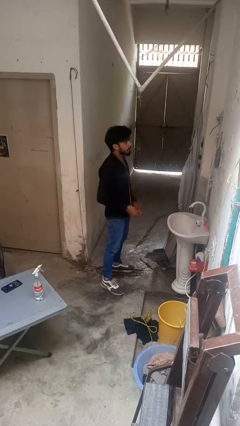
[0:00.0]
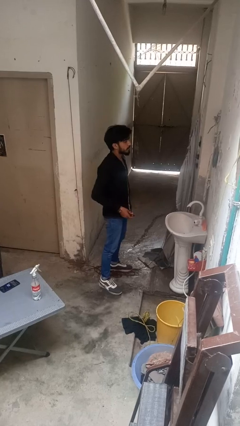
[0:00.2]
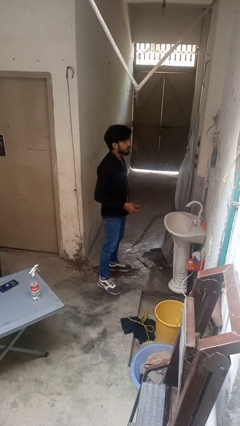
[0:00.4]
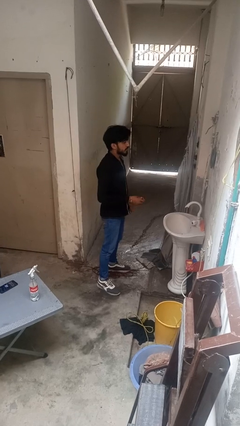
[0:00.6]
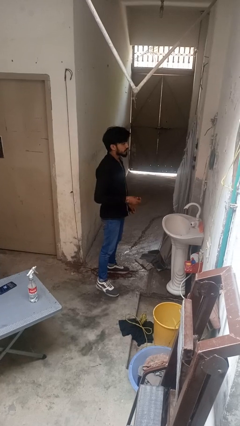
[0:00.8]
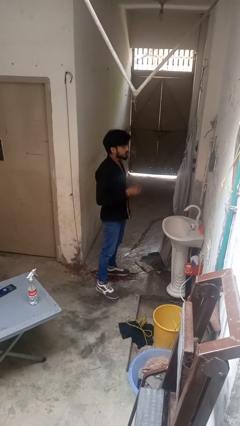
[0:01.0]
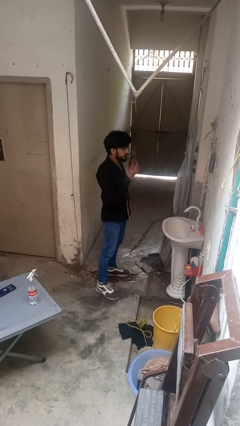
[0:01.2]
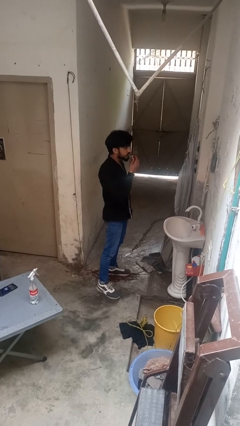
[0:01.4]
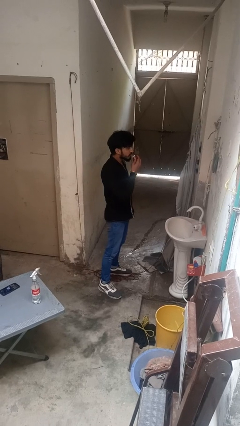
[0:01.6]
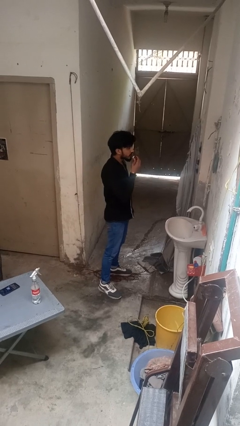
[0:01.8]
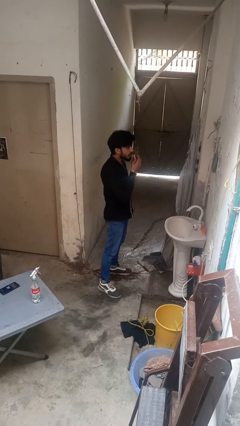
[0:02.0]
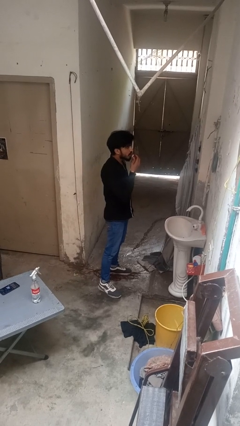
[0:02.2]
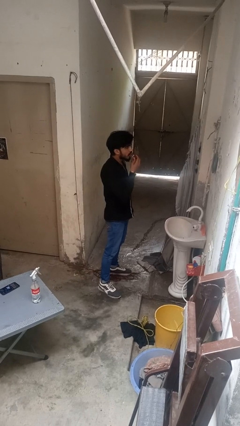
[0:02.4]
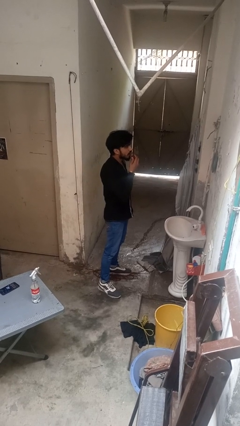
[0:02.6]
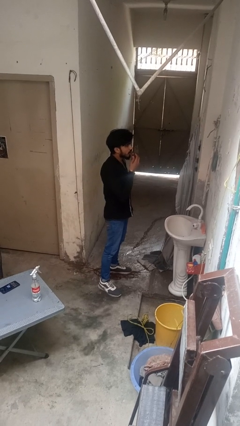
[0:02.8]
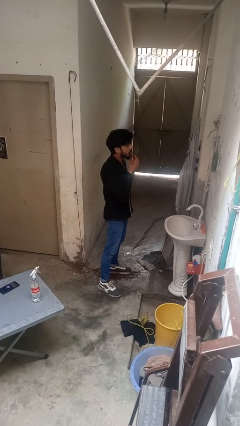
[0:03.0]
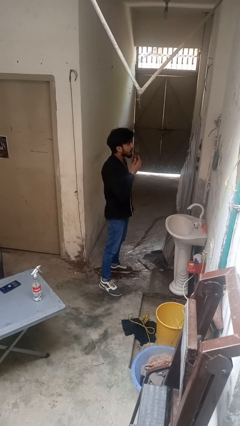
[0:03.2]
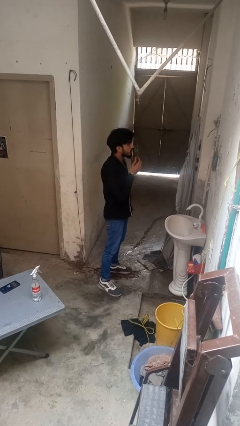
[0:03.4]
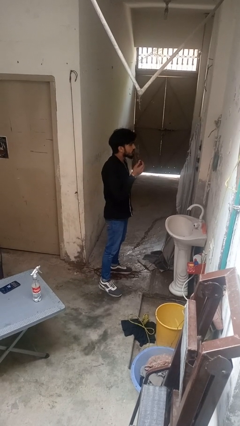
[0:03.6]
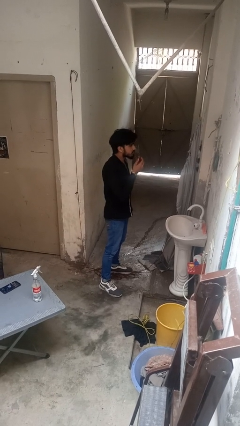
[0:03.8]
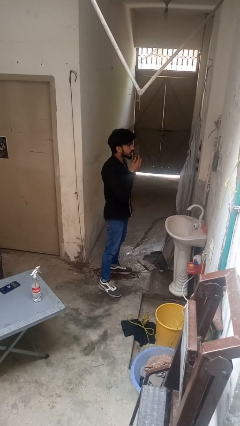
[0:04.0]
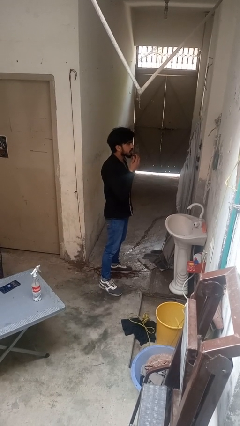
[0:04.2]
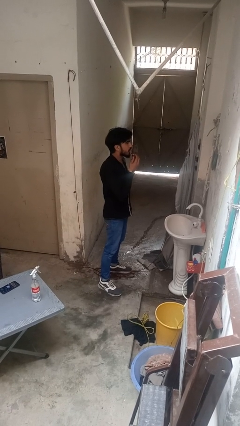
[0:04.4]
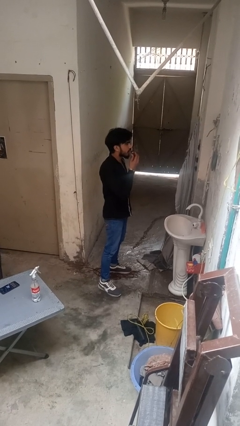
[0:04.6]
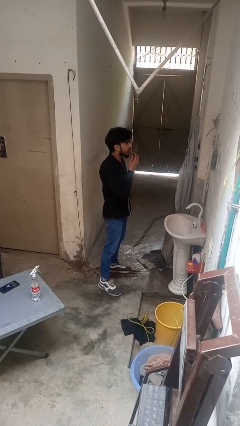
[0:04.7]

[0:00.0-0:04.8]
person applies lip makeup

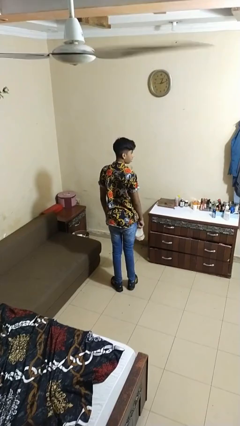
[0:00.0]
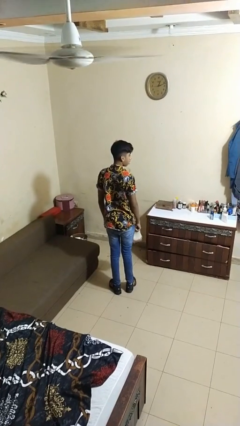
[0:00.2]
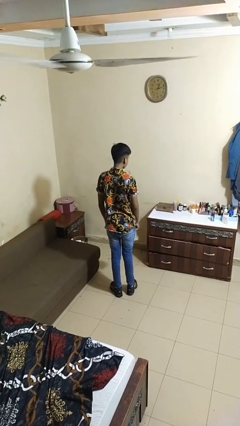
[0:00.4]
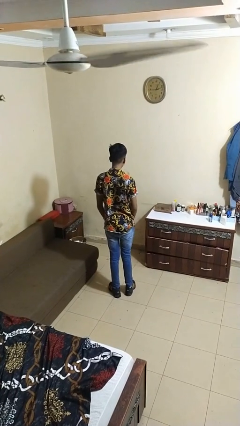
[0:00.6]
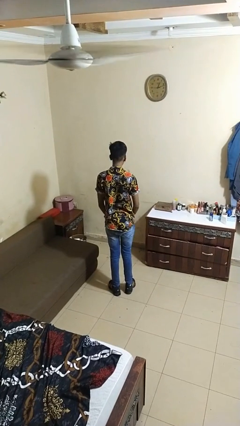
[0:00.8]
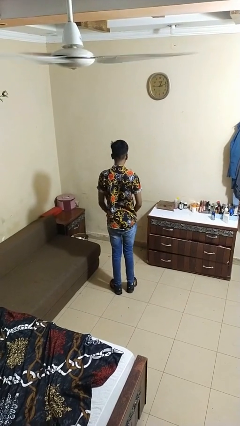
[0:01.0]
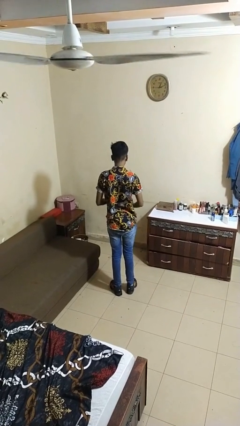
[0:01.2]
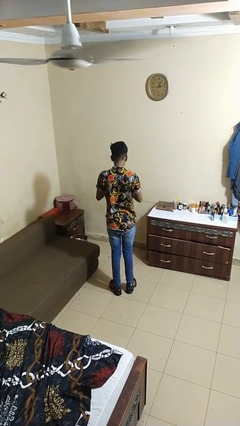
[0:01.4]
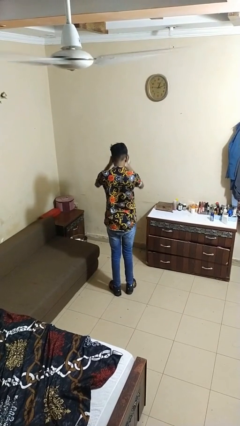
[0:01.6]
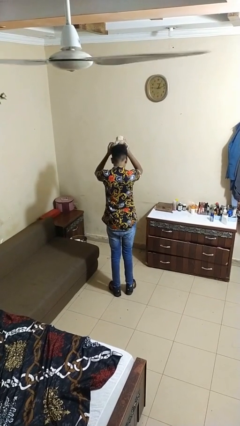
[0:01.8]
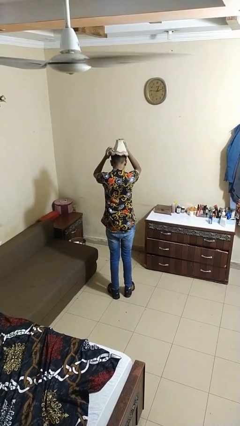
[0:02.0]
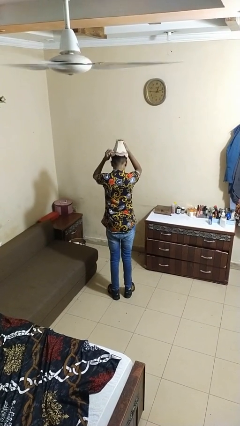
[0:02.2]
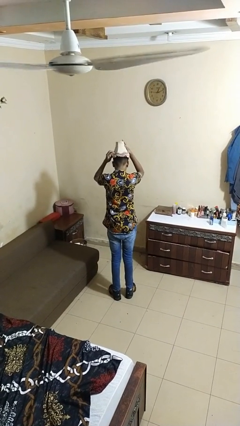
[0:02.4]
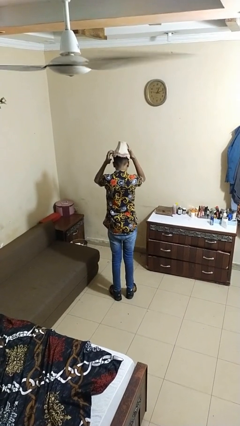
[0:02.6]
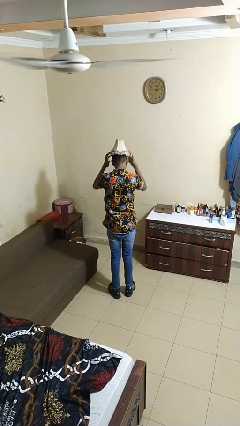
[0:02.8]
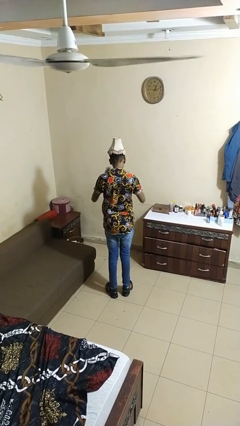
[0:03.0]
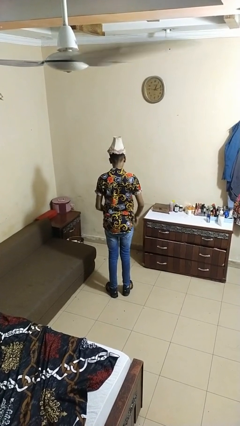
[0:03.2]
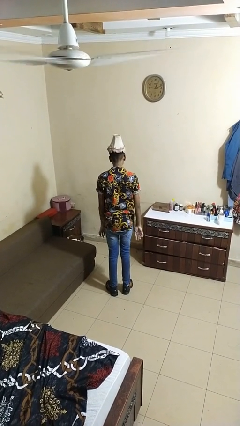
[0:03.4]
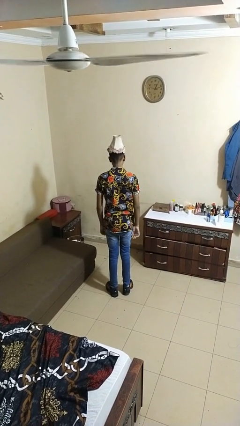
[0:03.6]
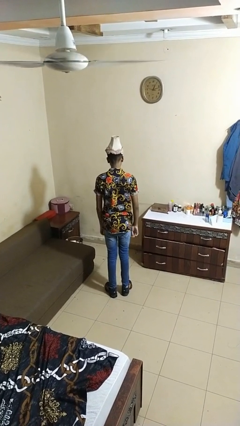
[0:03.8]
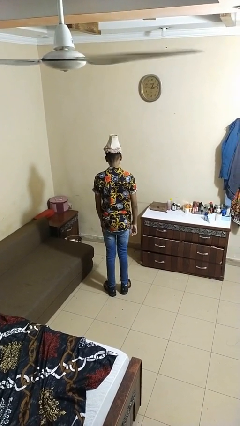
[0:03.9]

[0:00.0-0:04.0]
person puts on hat

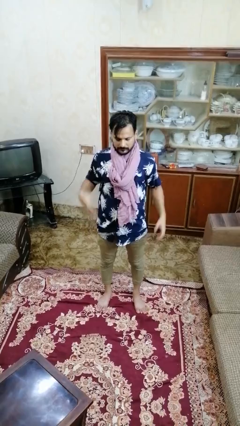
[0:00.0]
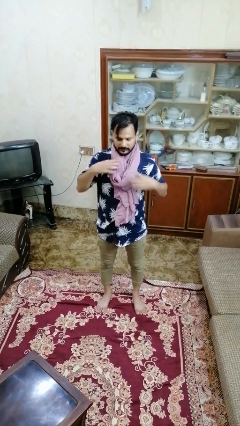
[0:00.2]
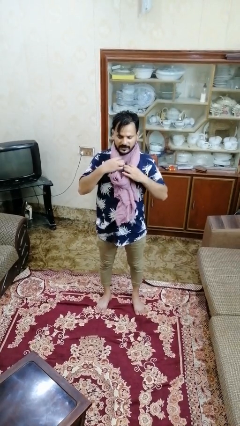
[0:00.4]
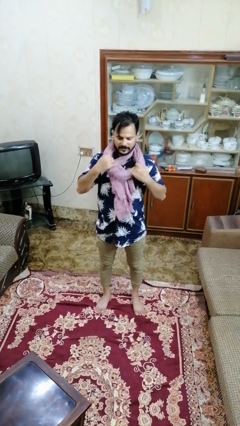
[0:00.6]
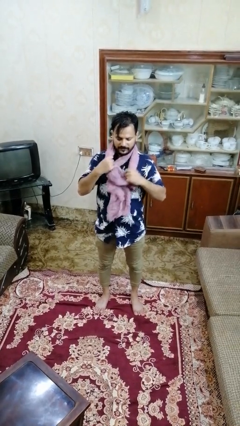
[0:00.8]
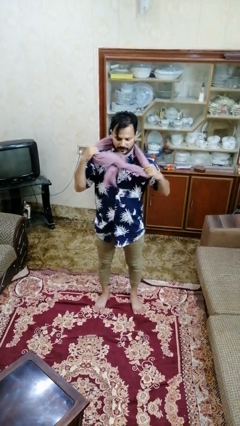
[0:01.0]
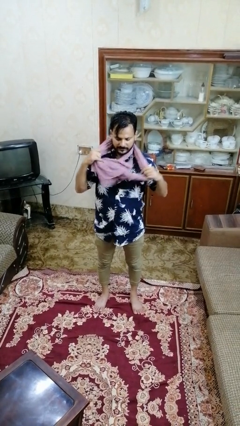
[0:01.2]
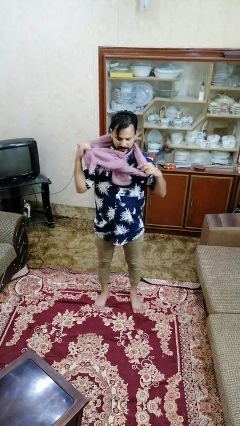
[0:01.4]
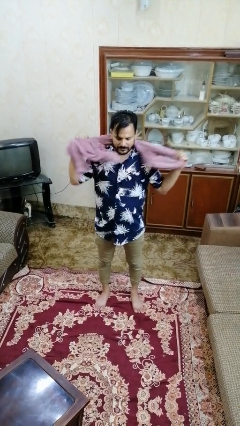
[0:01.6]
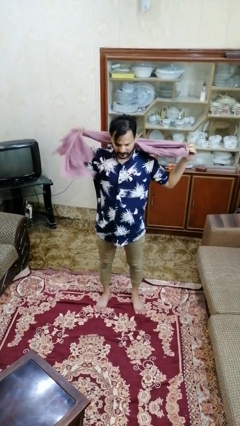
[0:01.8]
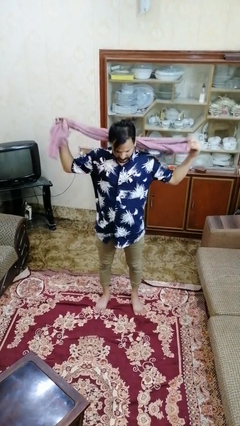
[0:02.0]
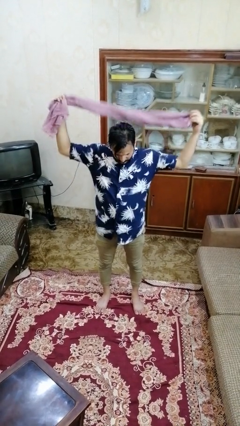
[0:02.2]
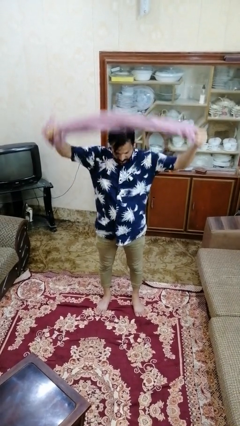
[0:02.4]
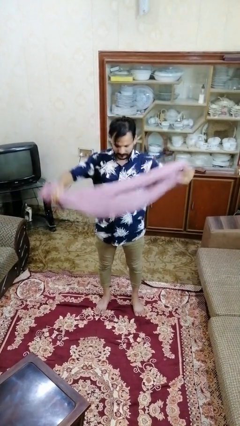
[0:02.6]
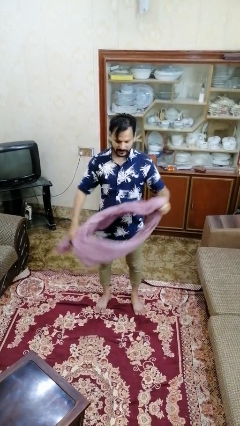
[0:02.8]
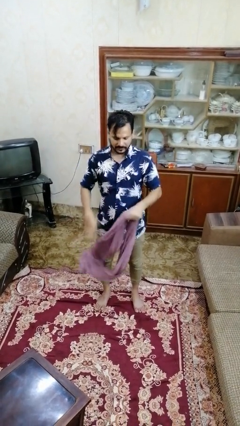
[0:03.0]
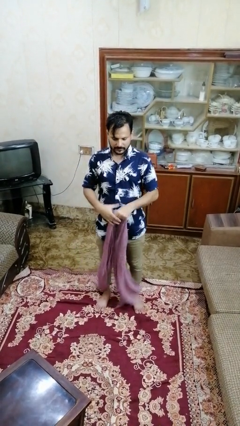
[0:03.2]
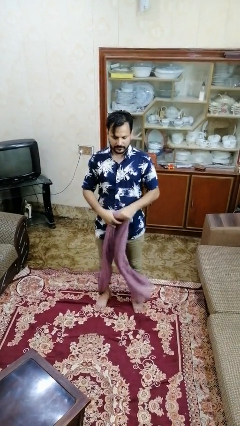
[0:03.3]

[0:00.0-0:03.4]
person takes off scarf

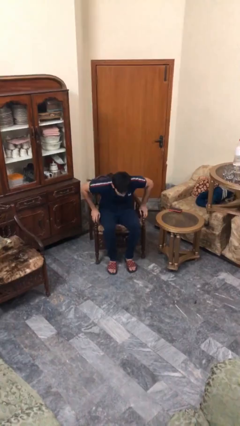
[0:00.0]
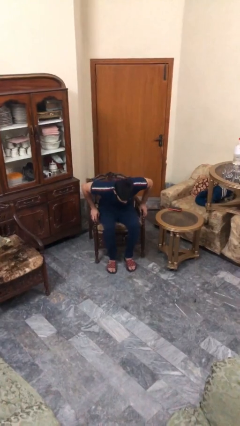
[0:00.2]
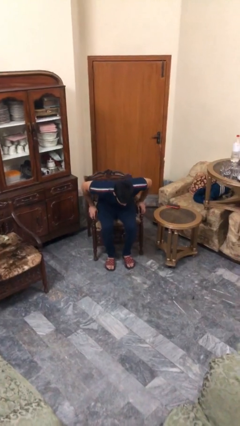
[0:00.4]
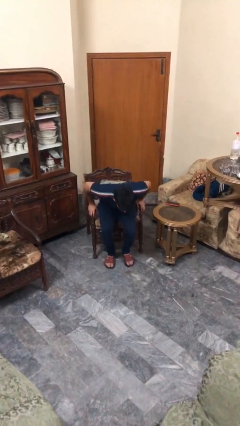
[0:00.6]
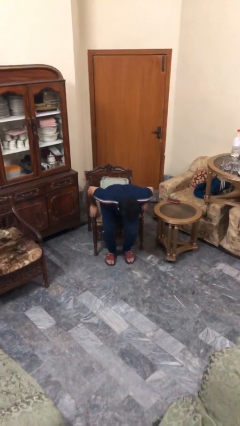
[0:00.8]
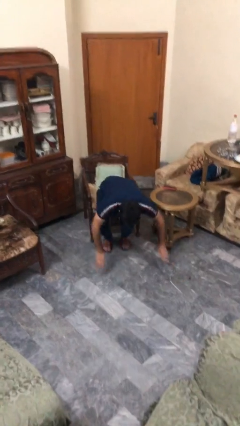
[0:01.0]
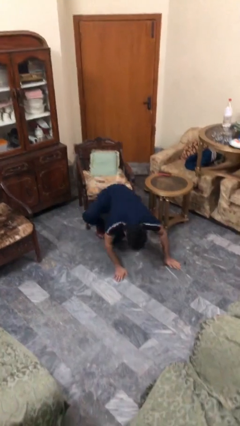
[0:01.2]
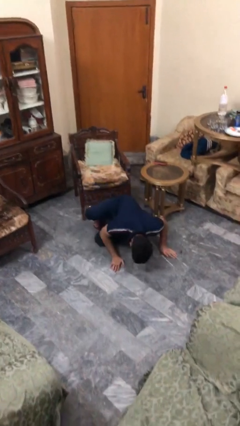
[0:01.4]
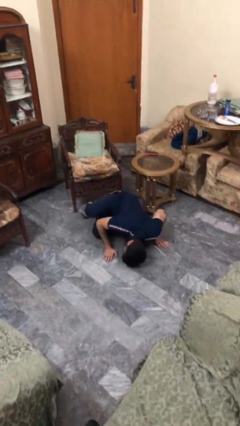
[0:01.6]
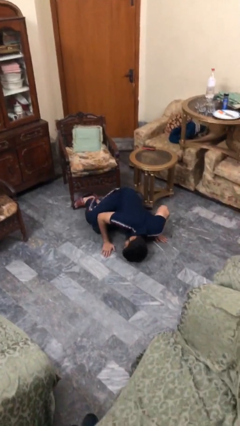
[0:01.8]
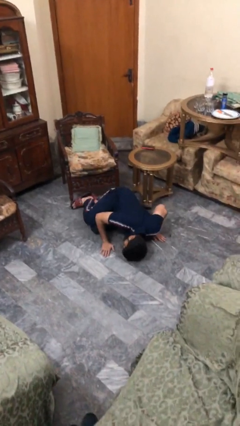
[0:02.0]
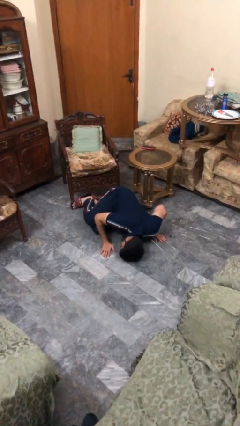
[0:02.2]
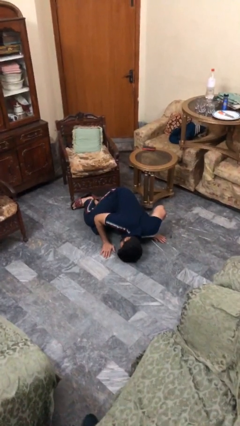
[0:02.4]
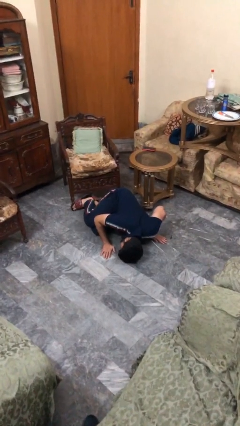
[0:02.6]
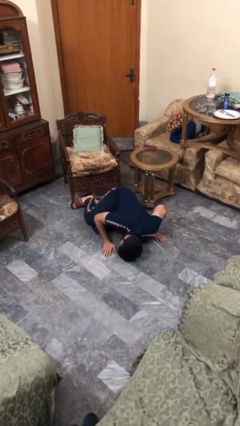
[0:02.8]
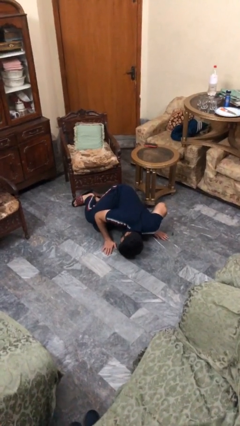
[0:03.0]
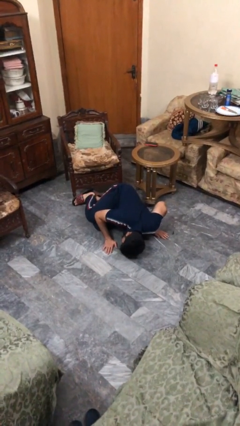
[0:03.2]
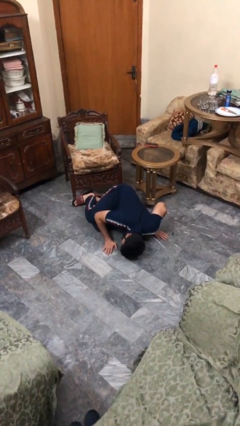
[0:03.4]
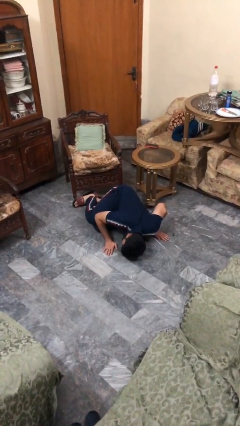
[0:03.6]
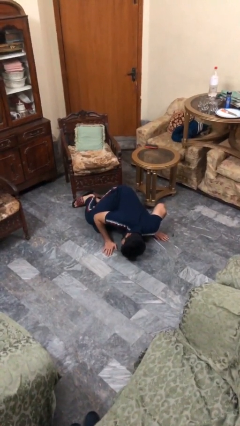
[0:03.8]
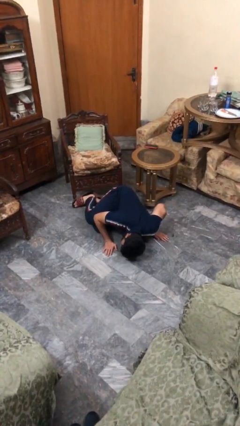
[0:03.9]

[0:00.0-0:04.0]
person falls from chair

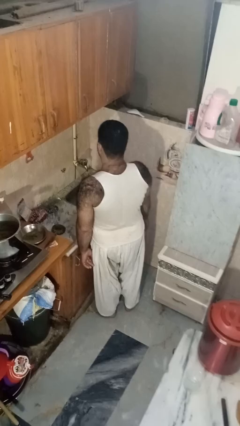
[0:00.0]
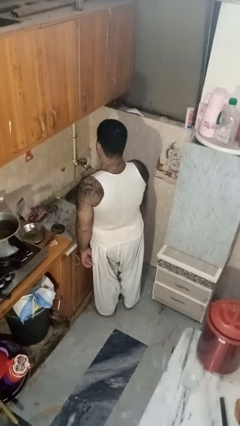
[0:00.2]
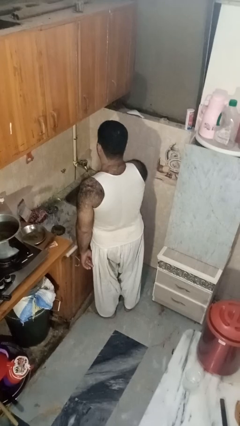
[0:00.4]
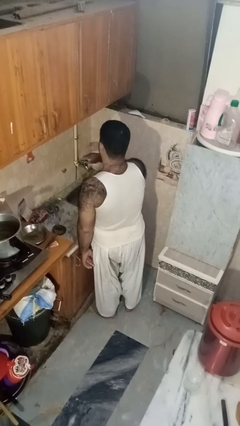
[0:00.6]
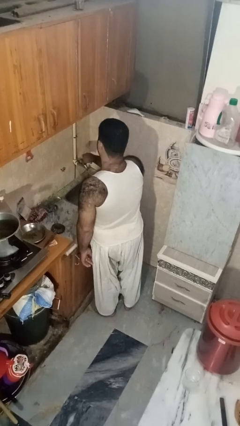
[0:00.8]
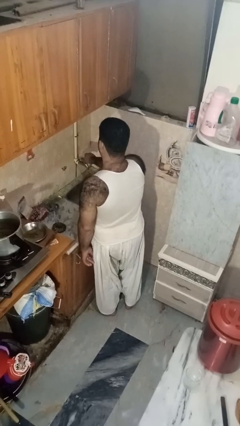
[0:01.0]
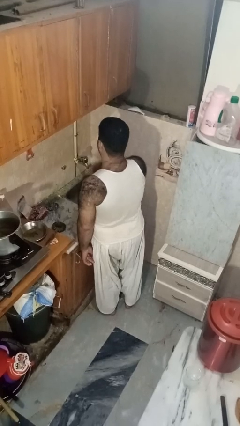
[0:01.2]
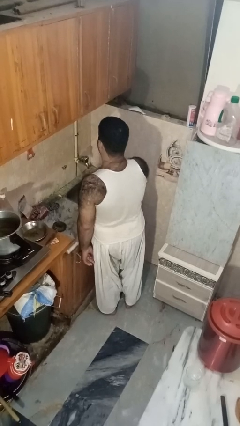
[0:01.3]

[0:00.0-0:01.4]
person turns off faucet
